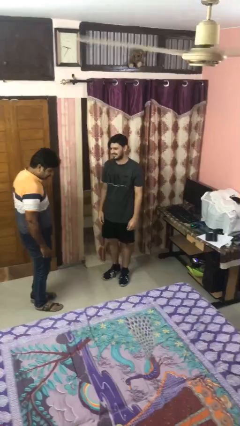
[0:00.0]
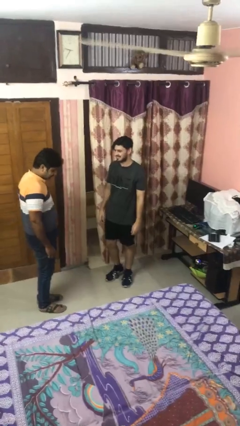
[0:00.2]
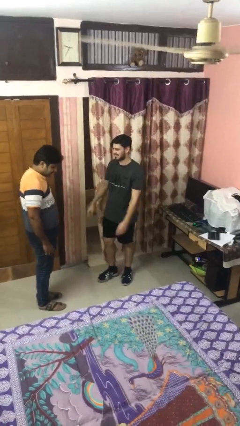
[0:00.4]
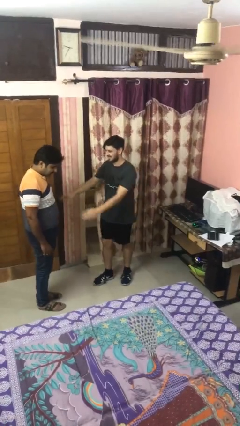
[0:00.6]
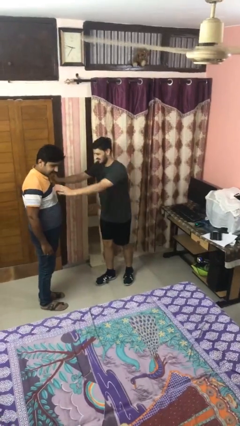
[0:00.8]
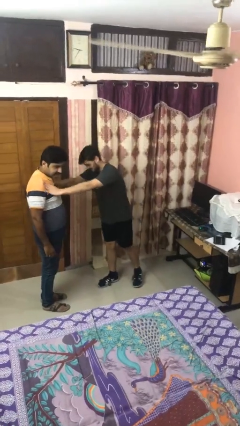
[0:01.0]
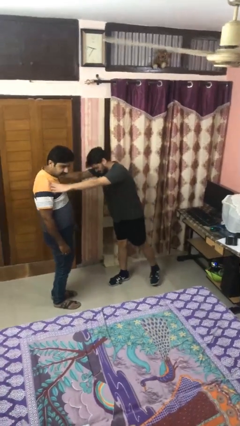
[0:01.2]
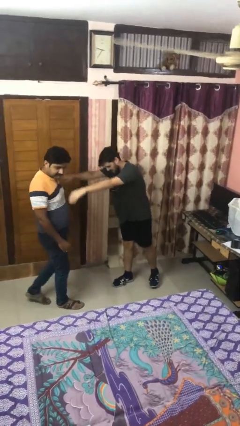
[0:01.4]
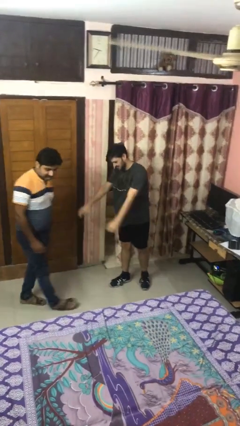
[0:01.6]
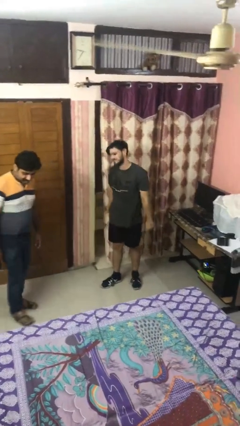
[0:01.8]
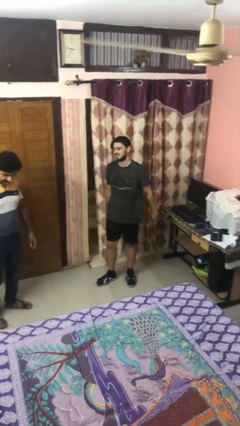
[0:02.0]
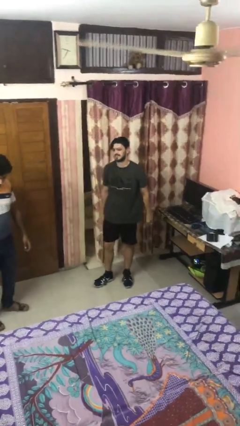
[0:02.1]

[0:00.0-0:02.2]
person shoves person

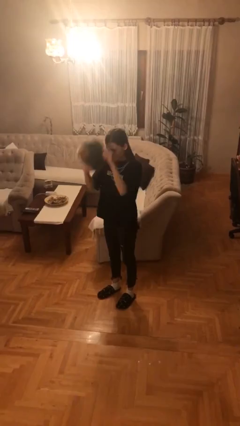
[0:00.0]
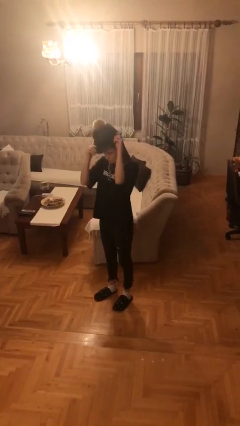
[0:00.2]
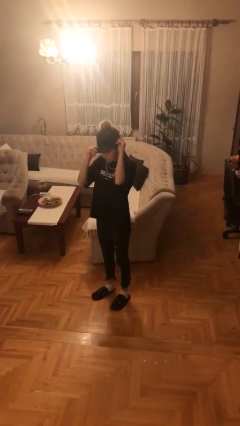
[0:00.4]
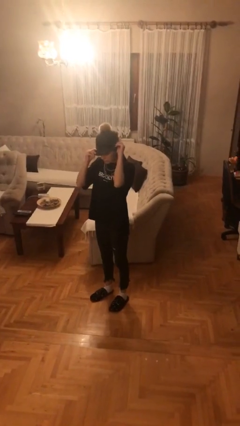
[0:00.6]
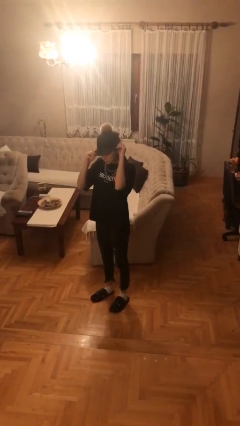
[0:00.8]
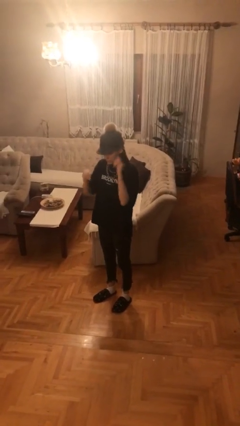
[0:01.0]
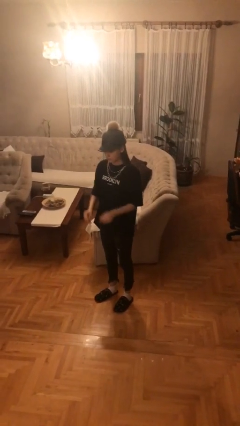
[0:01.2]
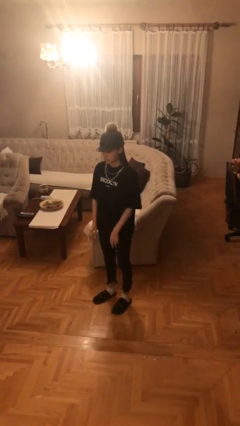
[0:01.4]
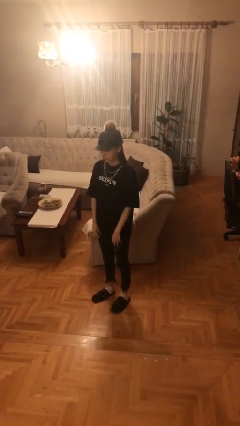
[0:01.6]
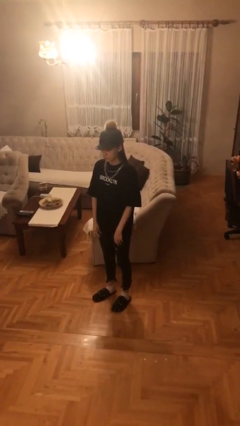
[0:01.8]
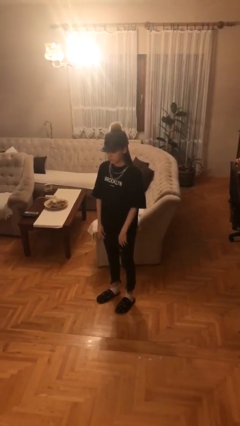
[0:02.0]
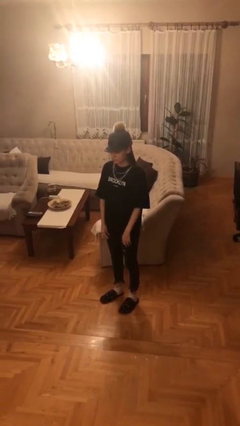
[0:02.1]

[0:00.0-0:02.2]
person puts on hat

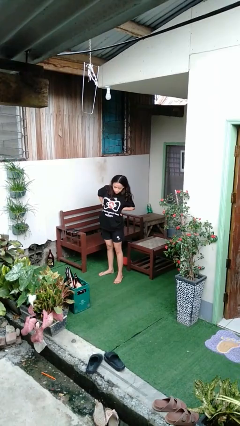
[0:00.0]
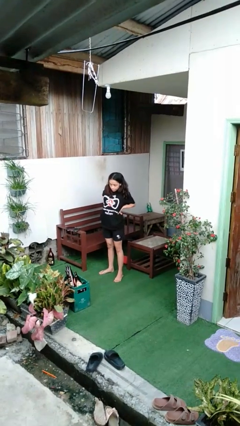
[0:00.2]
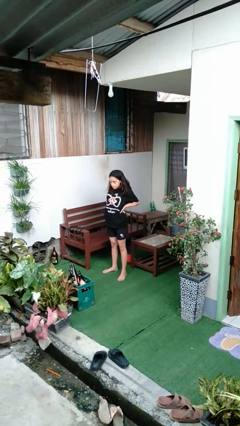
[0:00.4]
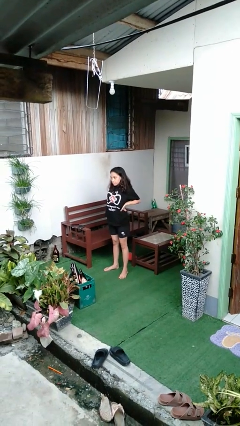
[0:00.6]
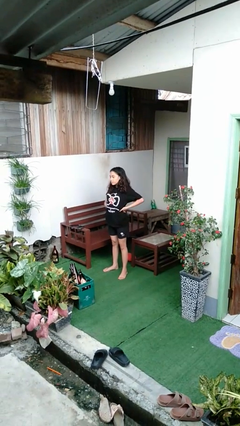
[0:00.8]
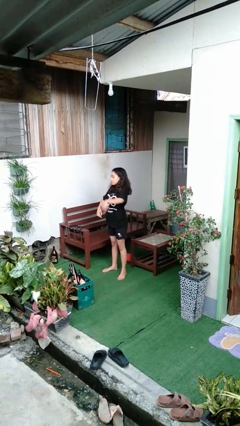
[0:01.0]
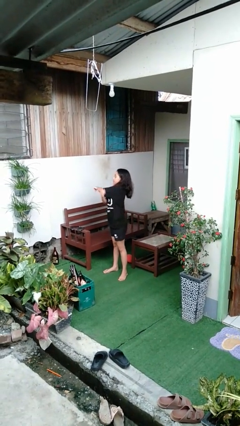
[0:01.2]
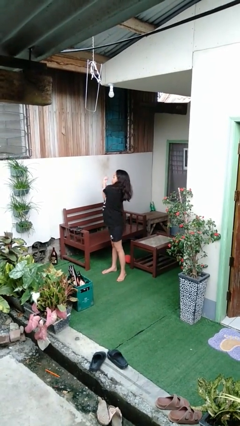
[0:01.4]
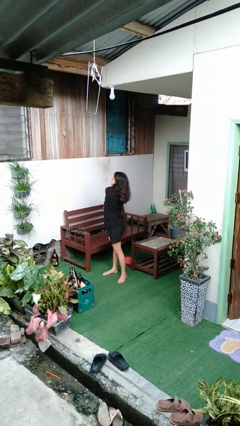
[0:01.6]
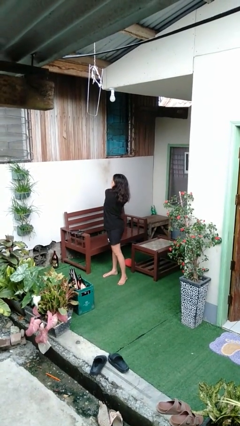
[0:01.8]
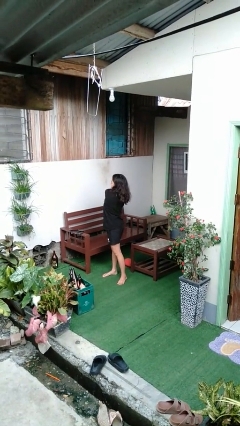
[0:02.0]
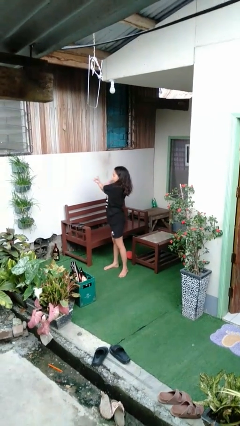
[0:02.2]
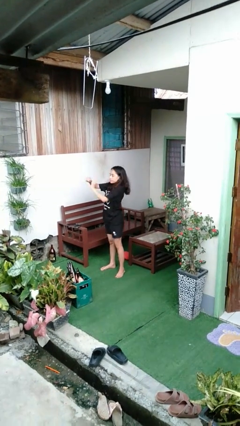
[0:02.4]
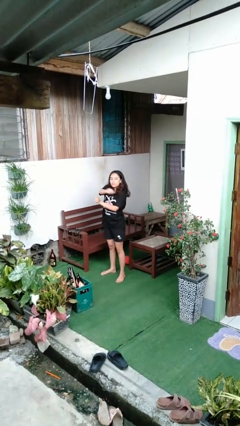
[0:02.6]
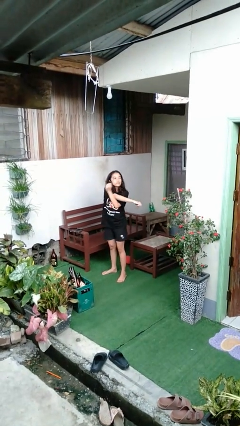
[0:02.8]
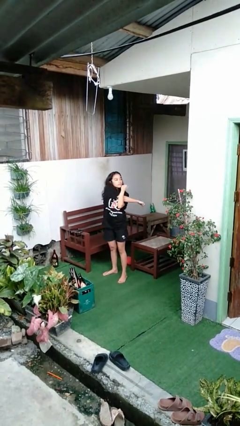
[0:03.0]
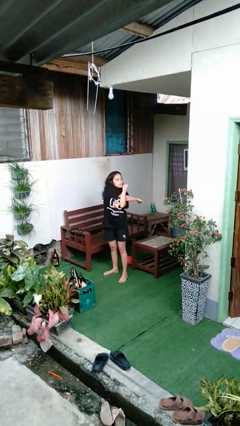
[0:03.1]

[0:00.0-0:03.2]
person stretches arms to side

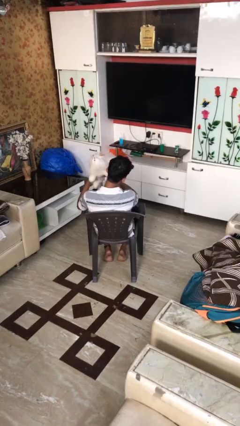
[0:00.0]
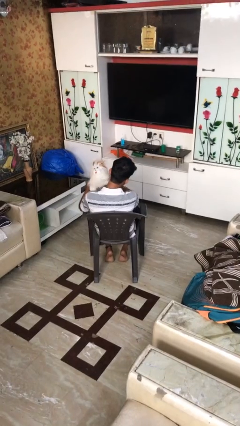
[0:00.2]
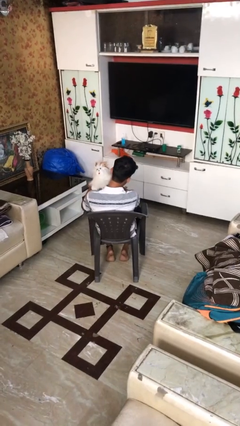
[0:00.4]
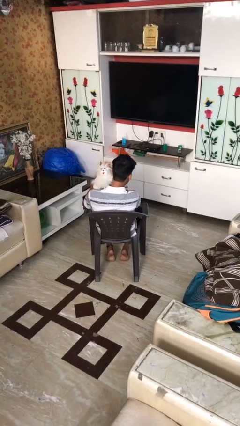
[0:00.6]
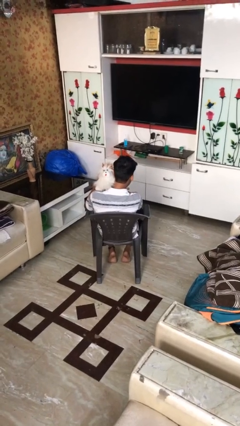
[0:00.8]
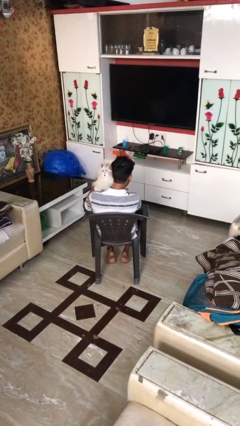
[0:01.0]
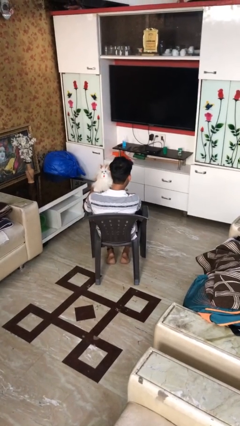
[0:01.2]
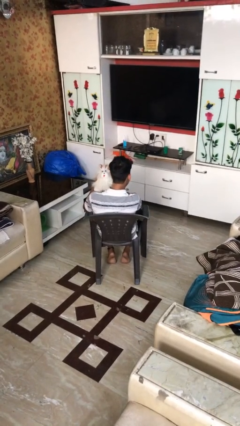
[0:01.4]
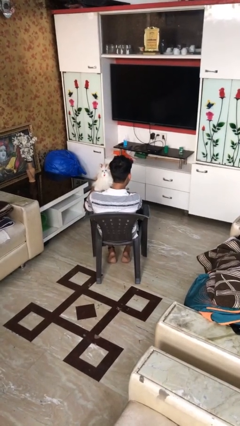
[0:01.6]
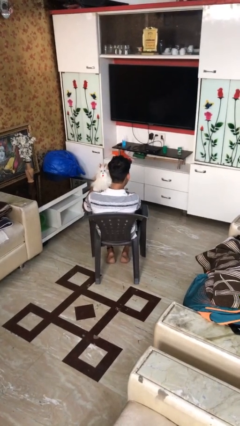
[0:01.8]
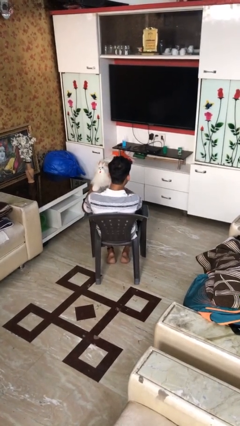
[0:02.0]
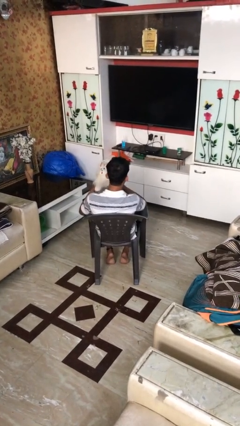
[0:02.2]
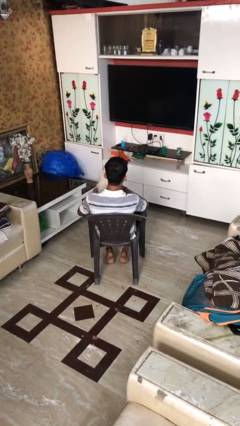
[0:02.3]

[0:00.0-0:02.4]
person hugs stuffed animal

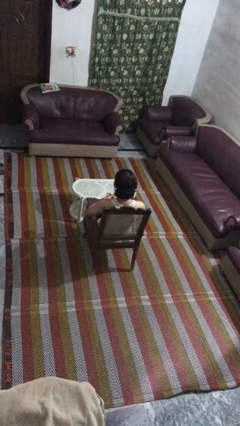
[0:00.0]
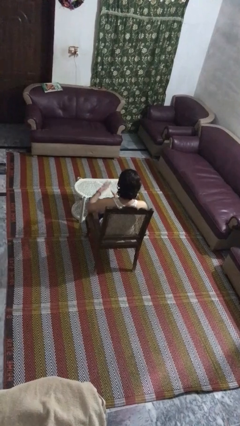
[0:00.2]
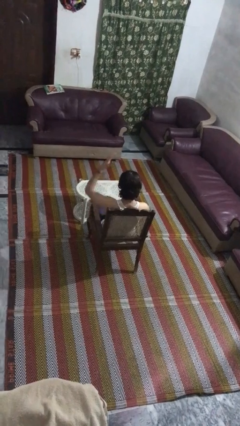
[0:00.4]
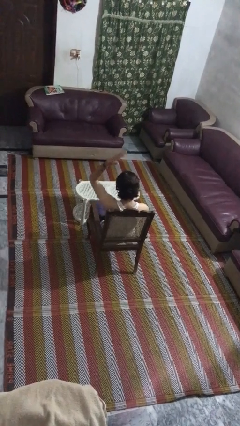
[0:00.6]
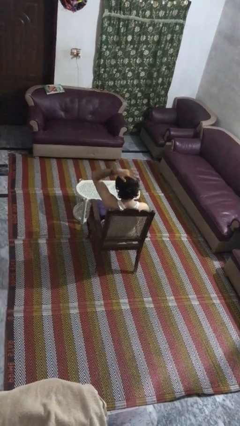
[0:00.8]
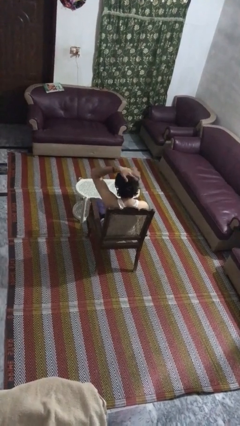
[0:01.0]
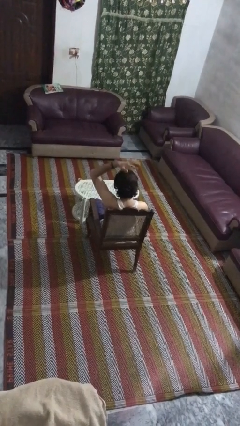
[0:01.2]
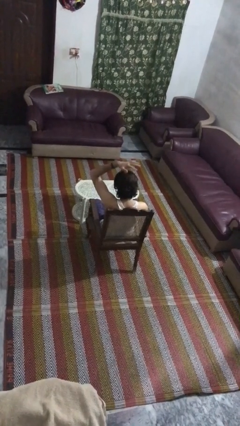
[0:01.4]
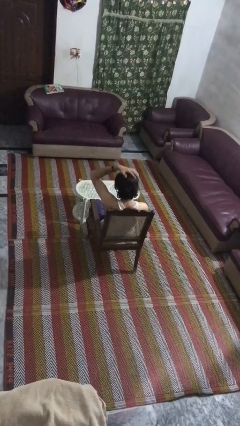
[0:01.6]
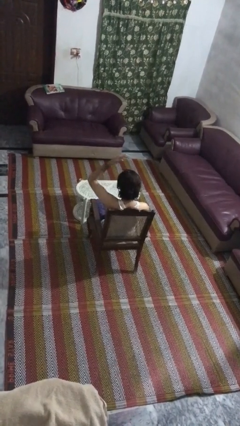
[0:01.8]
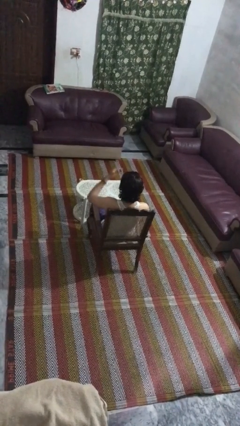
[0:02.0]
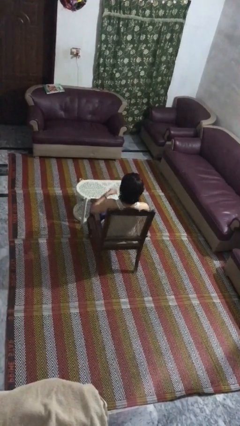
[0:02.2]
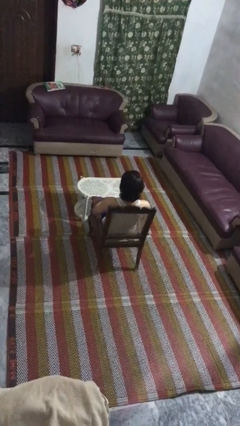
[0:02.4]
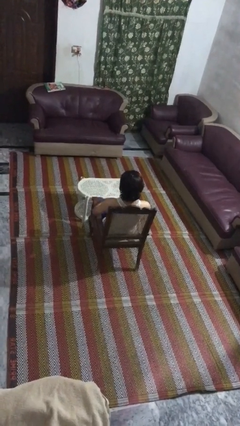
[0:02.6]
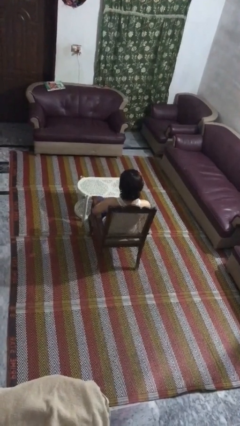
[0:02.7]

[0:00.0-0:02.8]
person pats head

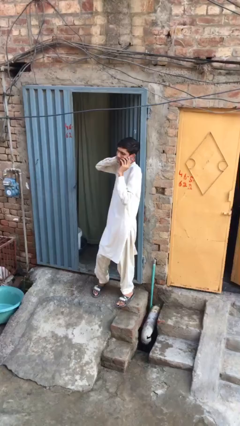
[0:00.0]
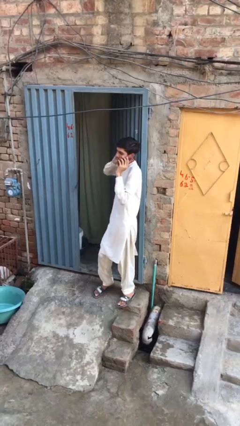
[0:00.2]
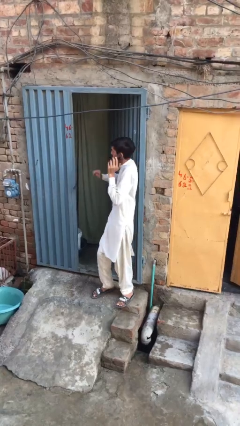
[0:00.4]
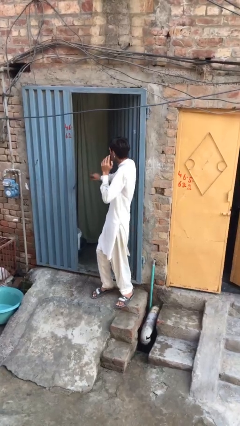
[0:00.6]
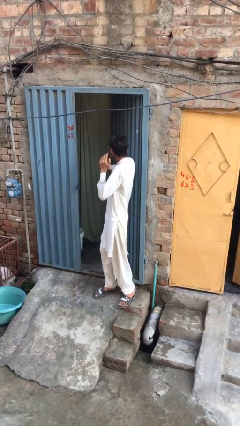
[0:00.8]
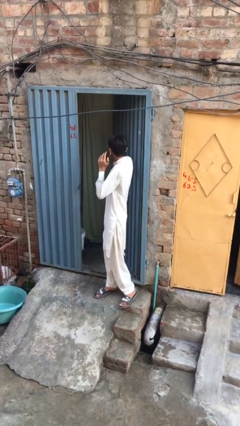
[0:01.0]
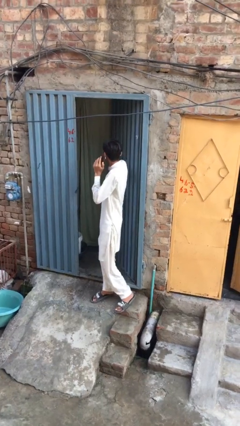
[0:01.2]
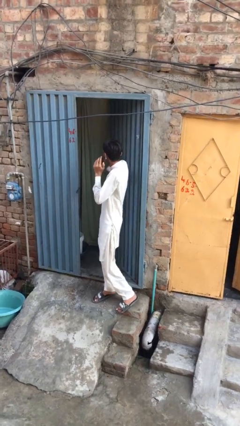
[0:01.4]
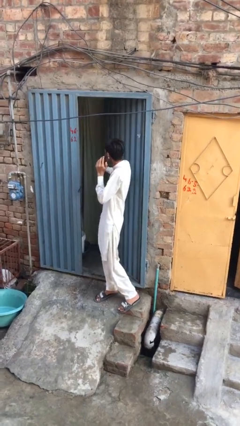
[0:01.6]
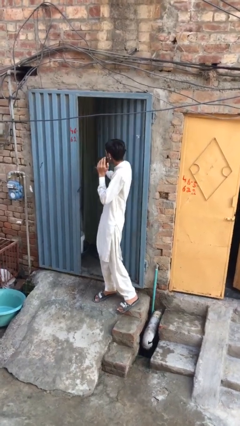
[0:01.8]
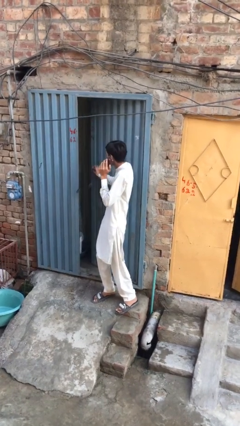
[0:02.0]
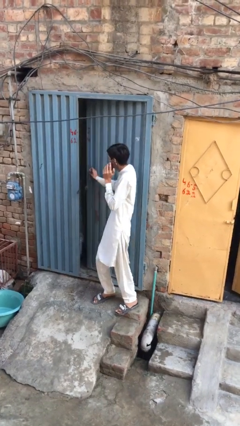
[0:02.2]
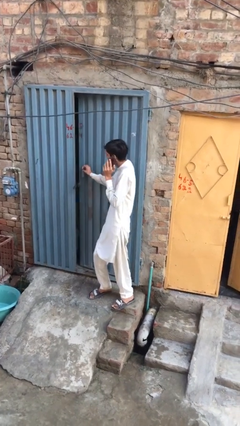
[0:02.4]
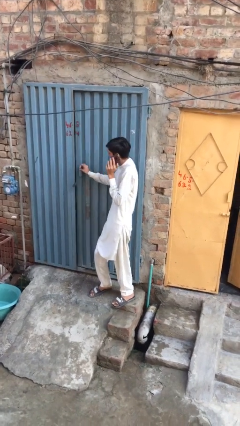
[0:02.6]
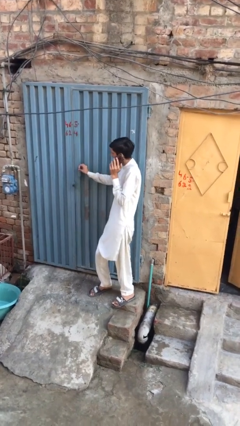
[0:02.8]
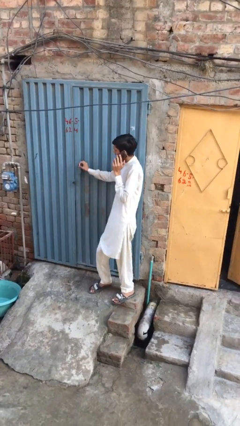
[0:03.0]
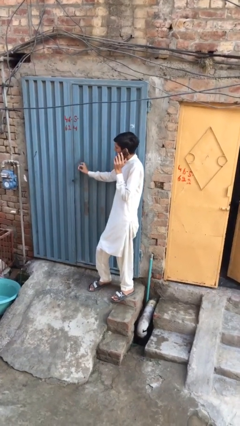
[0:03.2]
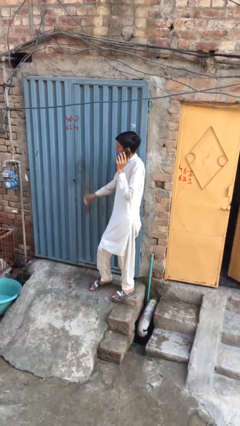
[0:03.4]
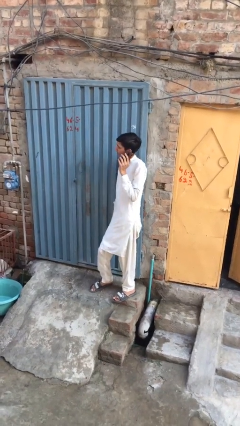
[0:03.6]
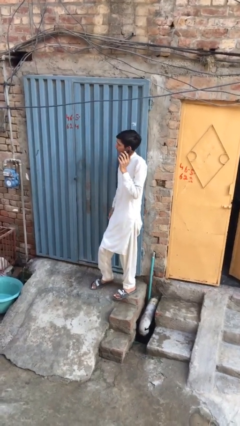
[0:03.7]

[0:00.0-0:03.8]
person closes facility door

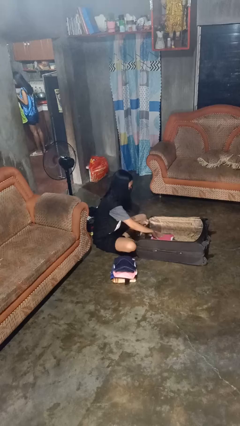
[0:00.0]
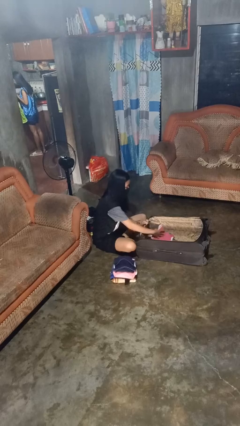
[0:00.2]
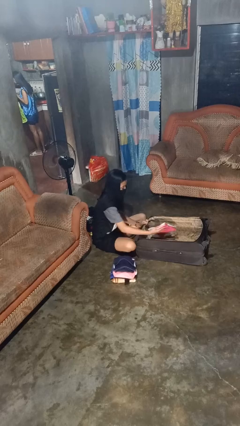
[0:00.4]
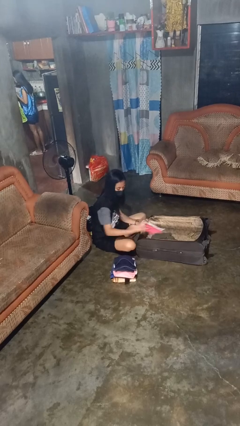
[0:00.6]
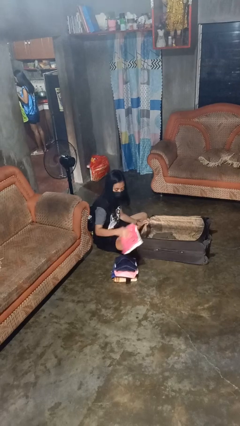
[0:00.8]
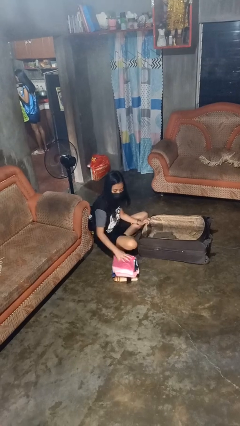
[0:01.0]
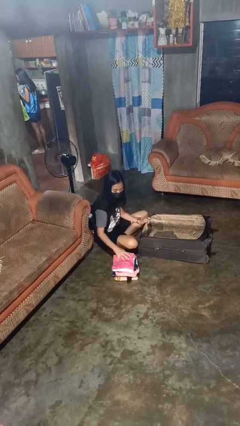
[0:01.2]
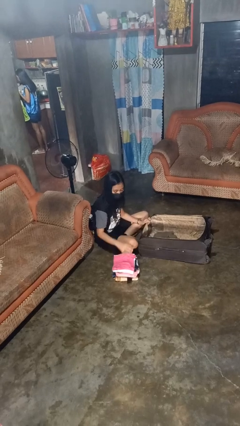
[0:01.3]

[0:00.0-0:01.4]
person unloads clothes from suitcase
